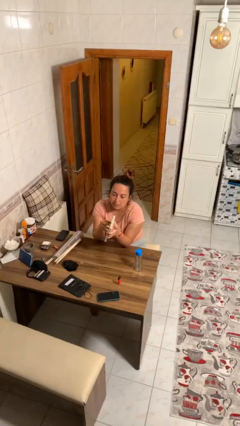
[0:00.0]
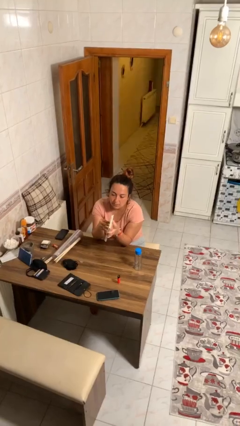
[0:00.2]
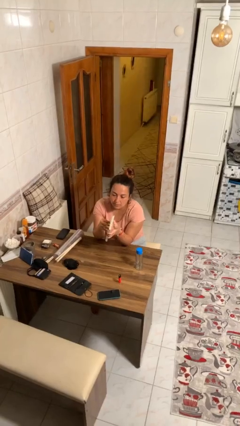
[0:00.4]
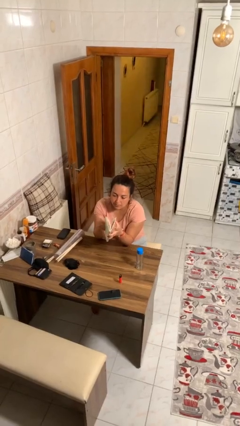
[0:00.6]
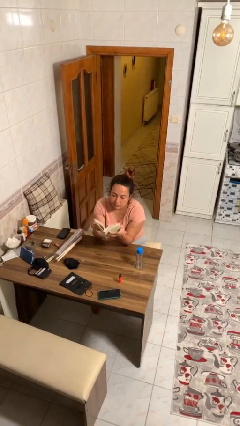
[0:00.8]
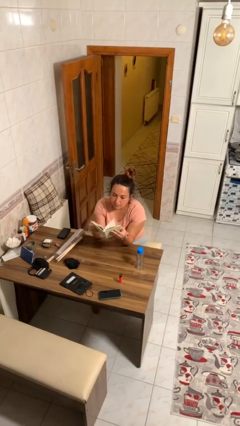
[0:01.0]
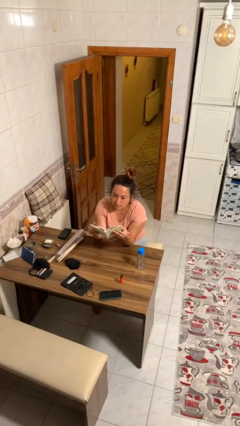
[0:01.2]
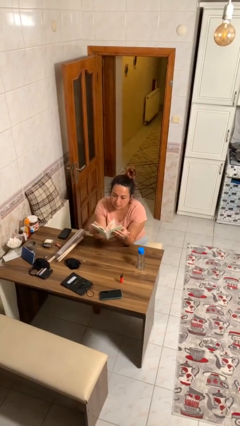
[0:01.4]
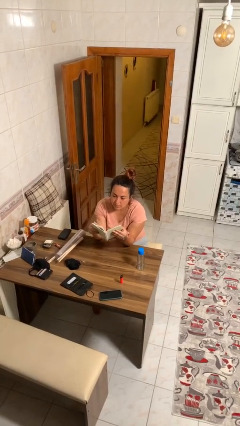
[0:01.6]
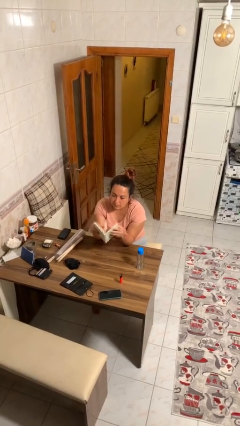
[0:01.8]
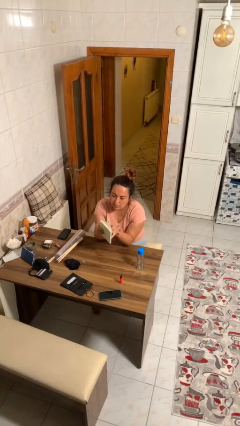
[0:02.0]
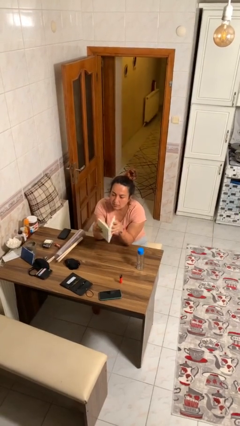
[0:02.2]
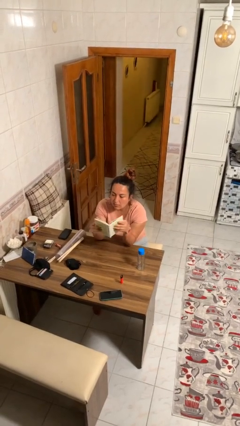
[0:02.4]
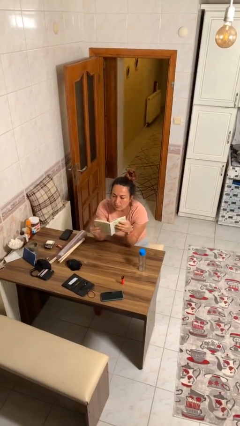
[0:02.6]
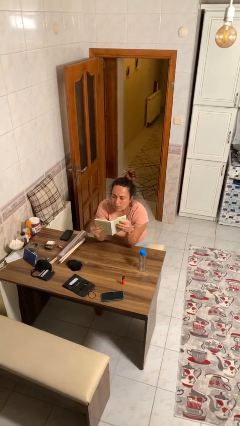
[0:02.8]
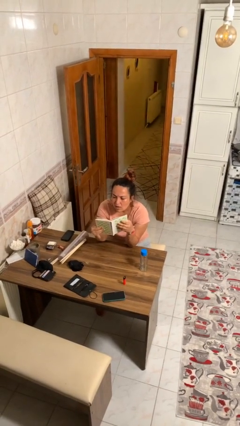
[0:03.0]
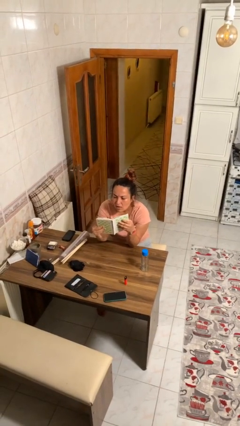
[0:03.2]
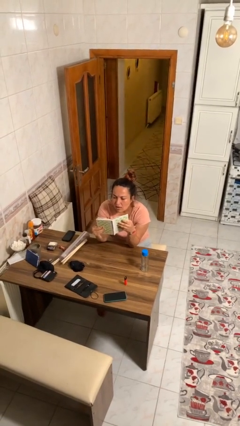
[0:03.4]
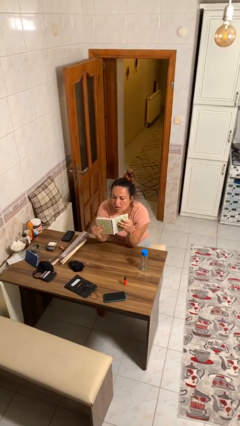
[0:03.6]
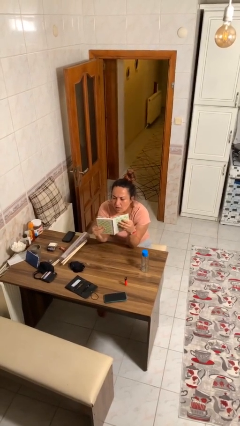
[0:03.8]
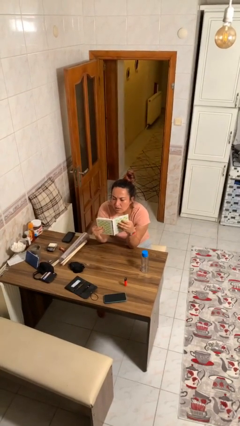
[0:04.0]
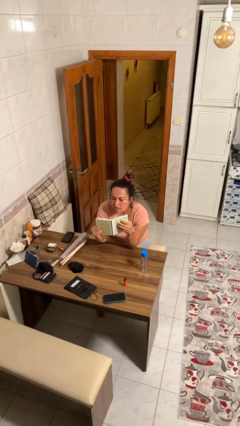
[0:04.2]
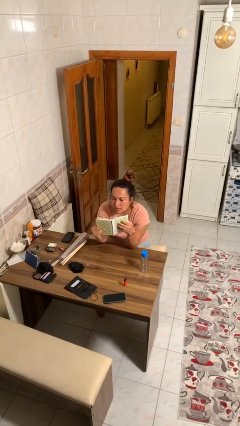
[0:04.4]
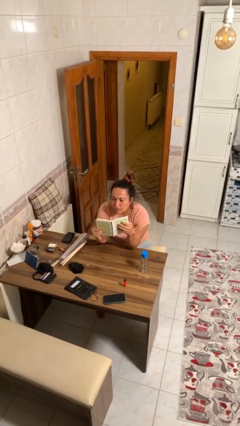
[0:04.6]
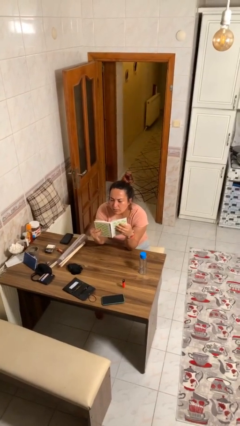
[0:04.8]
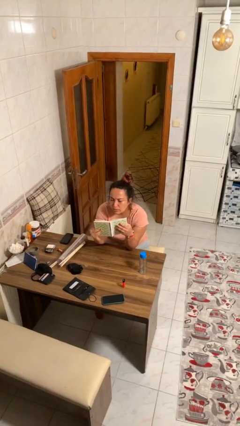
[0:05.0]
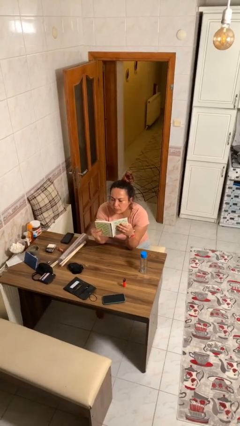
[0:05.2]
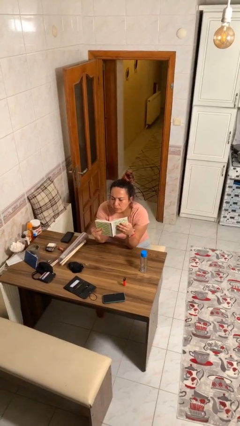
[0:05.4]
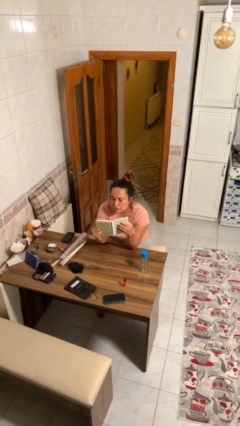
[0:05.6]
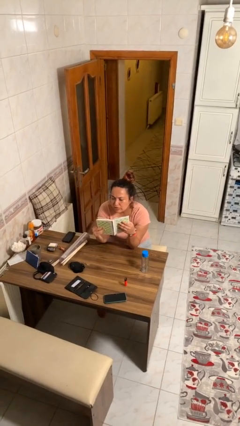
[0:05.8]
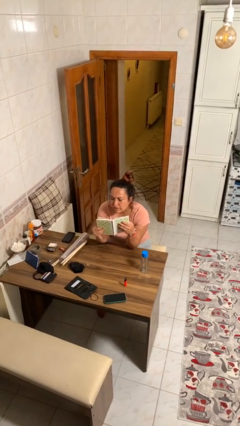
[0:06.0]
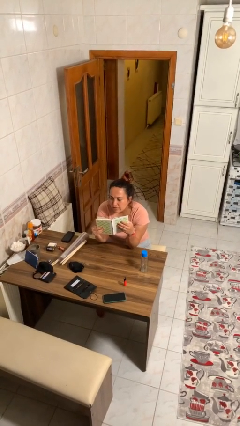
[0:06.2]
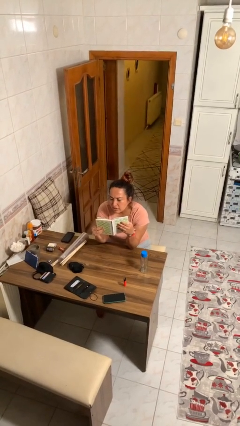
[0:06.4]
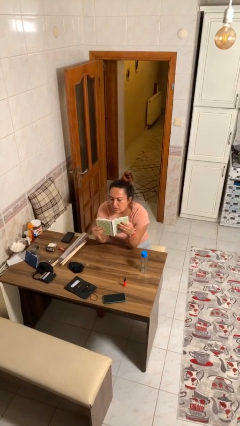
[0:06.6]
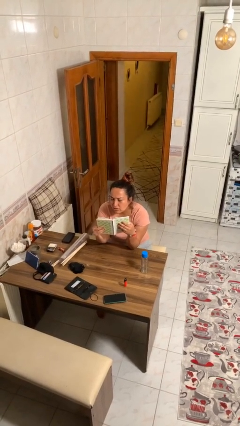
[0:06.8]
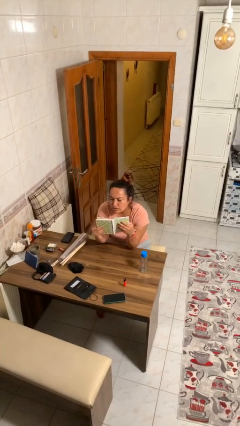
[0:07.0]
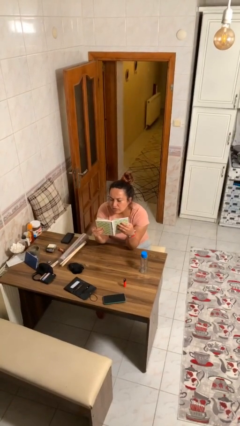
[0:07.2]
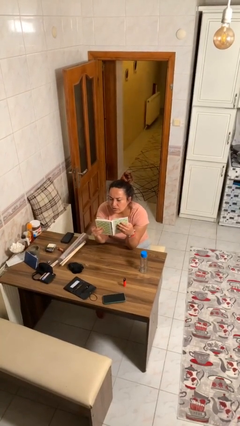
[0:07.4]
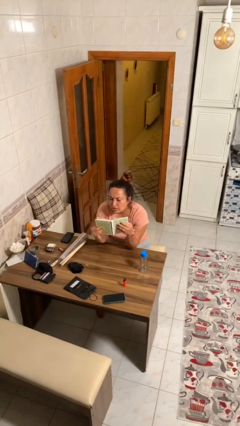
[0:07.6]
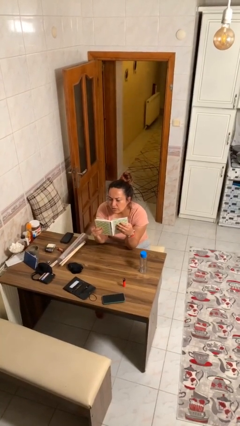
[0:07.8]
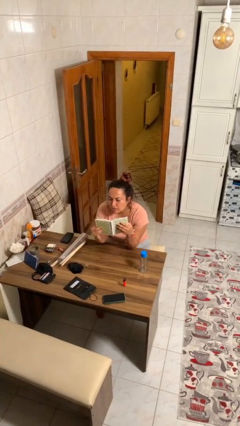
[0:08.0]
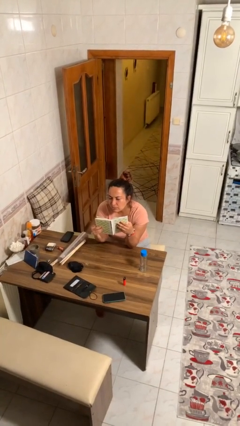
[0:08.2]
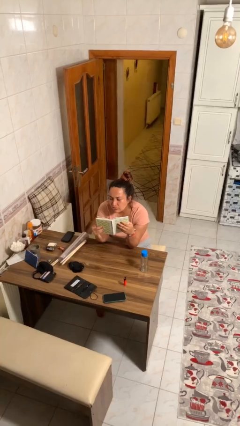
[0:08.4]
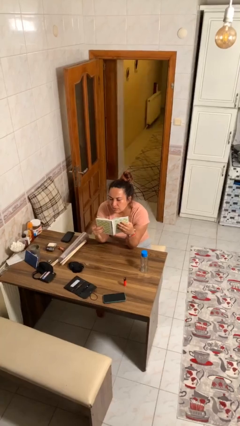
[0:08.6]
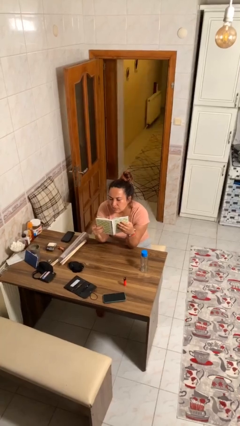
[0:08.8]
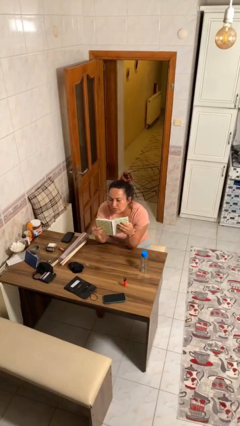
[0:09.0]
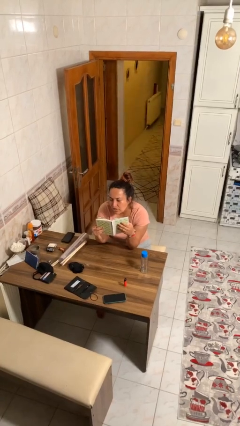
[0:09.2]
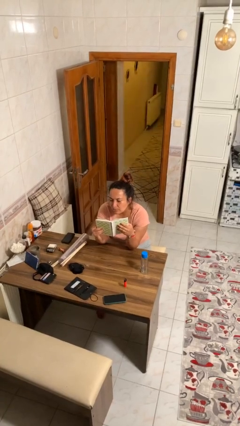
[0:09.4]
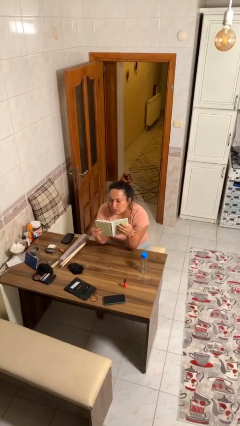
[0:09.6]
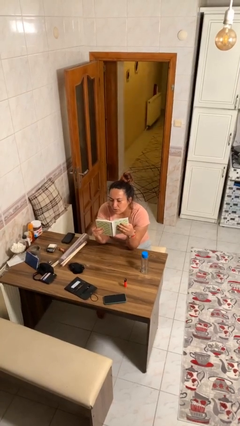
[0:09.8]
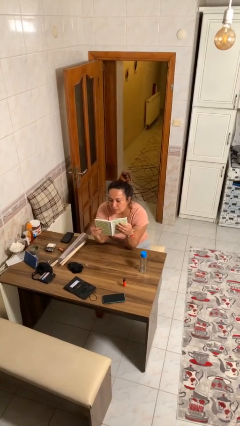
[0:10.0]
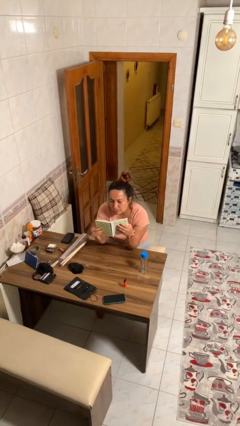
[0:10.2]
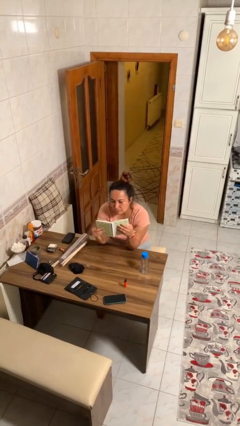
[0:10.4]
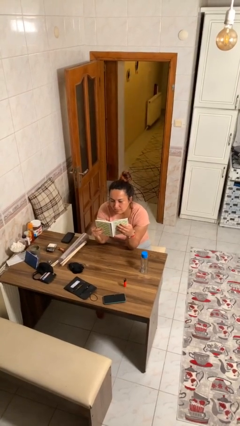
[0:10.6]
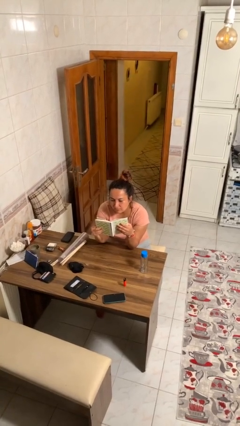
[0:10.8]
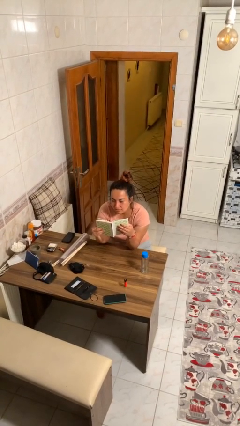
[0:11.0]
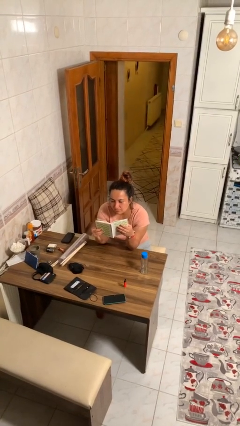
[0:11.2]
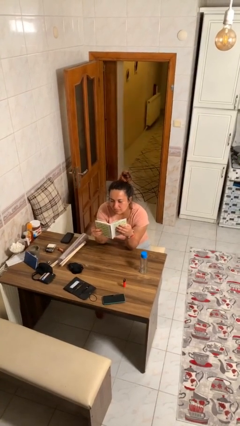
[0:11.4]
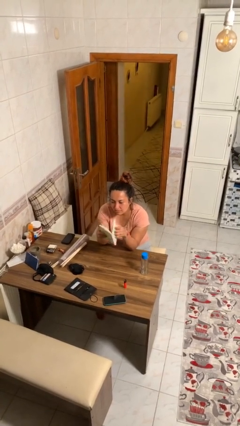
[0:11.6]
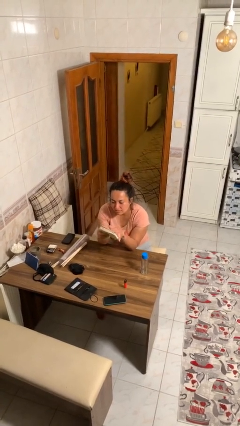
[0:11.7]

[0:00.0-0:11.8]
person reads document

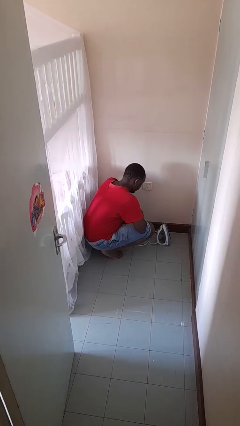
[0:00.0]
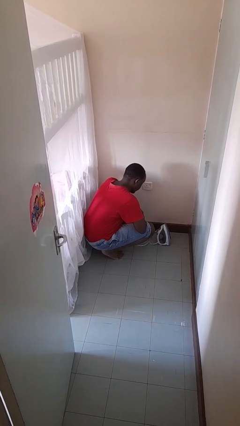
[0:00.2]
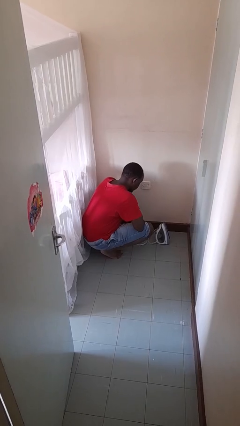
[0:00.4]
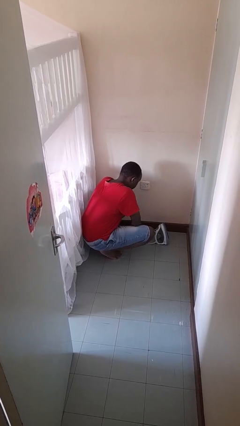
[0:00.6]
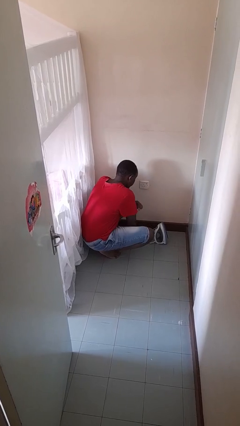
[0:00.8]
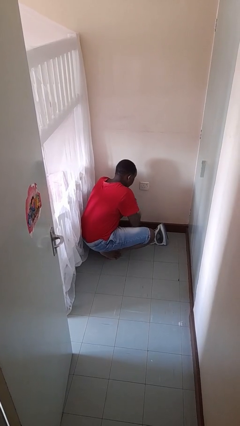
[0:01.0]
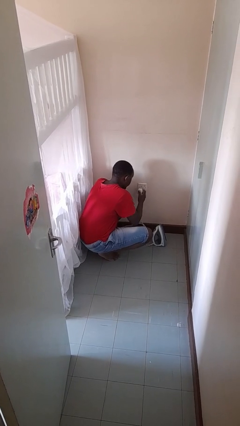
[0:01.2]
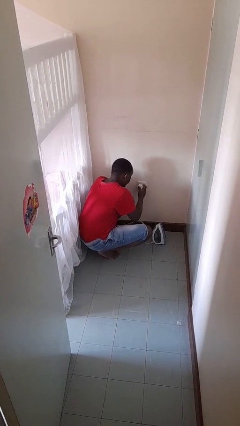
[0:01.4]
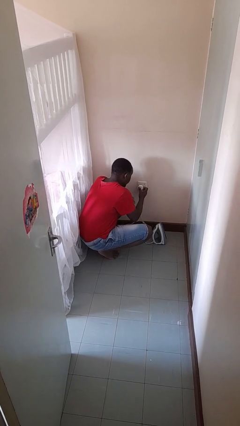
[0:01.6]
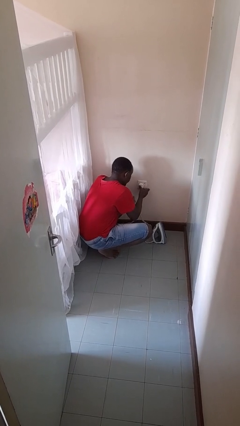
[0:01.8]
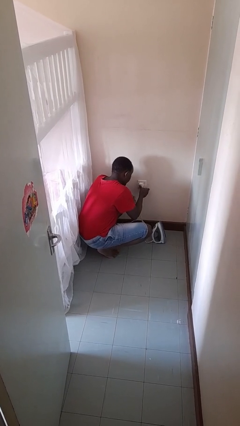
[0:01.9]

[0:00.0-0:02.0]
person plugs into electrical socket

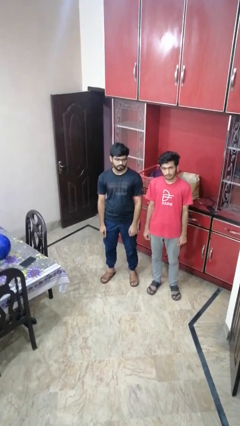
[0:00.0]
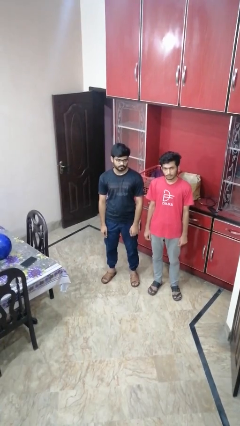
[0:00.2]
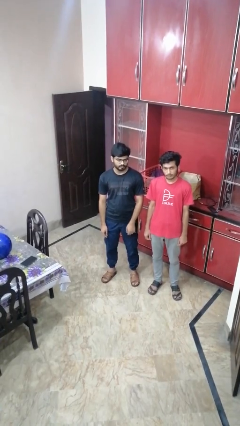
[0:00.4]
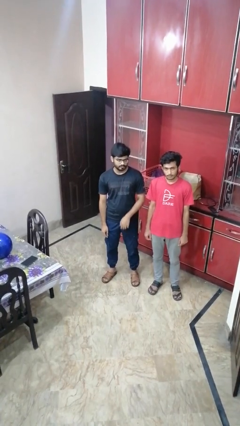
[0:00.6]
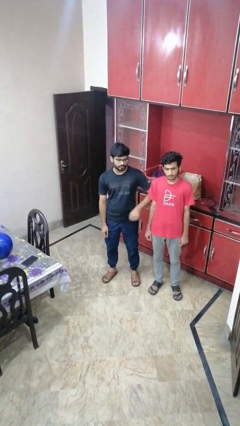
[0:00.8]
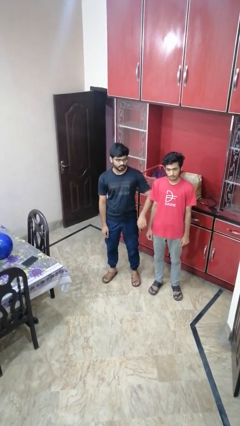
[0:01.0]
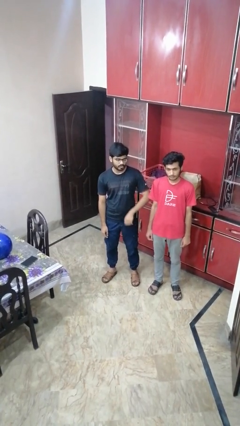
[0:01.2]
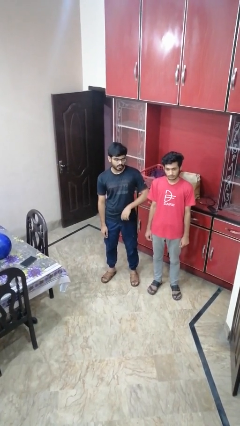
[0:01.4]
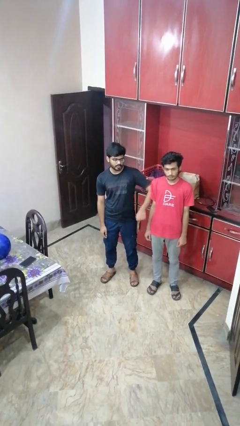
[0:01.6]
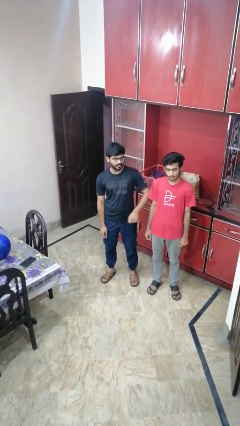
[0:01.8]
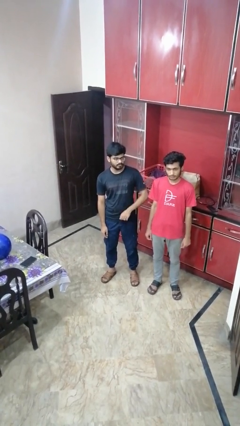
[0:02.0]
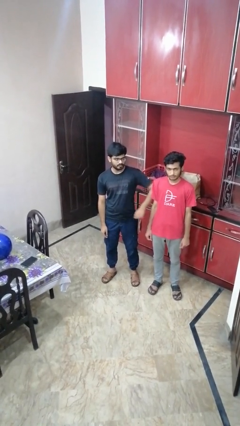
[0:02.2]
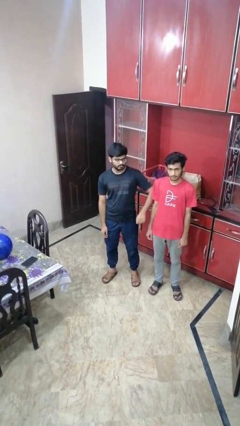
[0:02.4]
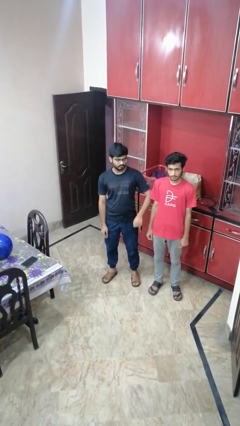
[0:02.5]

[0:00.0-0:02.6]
person nudges person with elbow

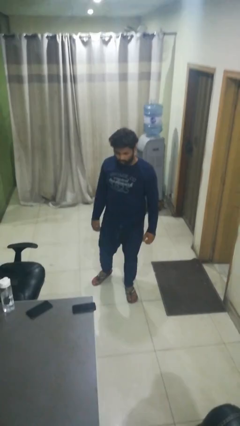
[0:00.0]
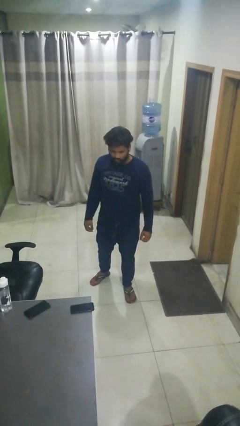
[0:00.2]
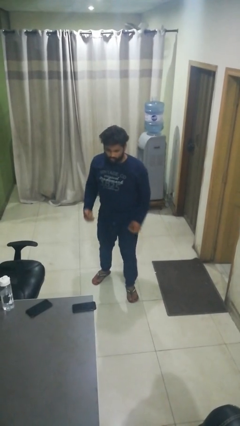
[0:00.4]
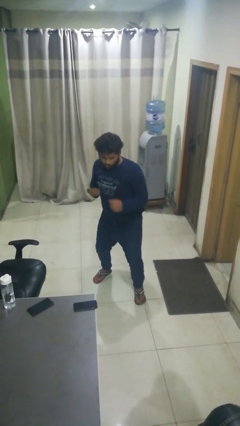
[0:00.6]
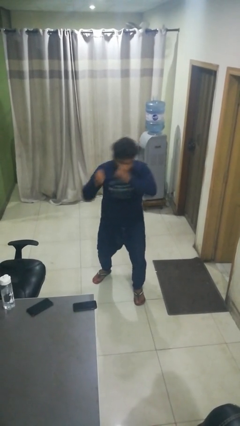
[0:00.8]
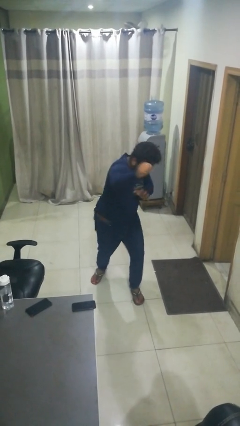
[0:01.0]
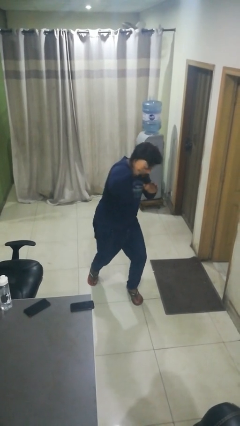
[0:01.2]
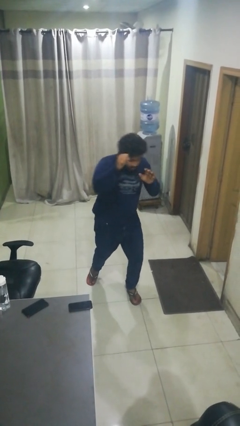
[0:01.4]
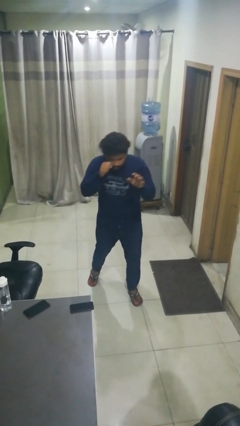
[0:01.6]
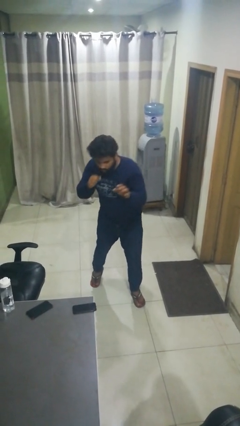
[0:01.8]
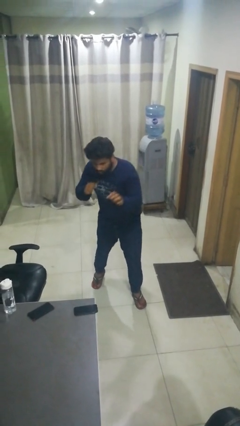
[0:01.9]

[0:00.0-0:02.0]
person punches
